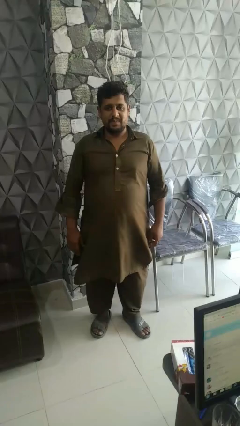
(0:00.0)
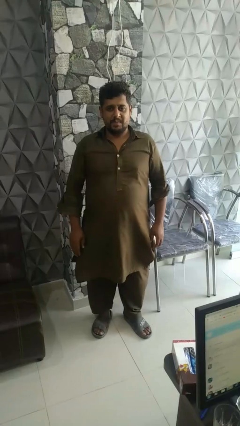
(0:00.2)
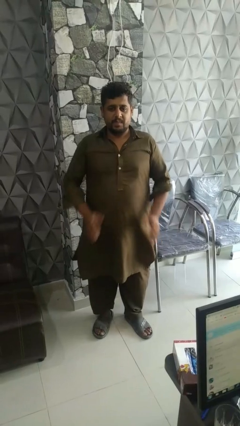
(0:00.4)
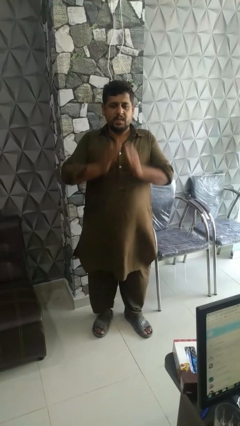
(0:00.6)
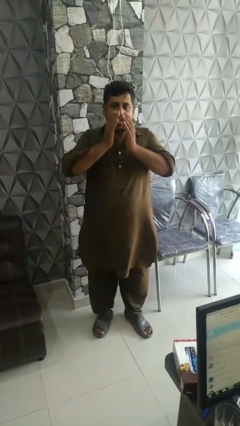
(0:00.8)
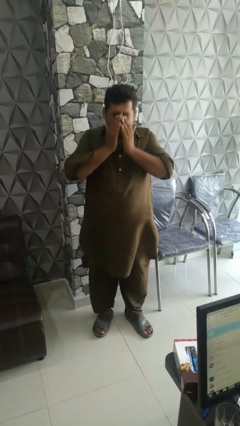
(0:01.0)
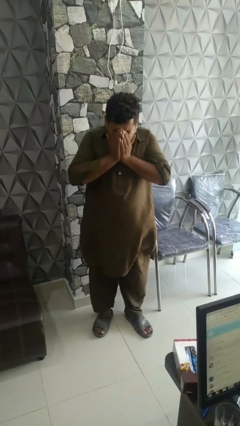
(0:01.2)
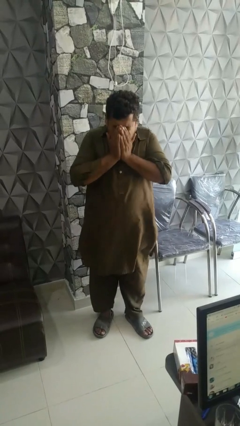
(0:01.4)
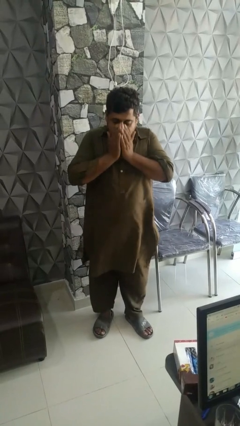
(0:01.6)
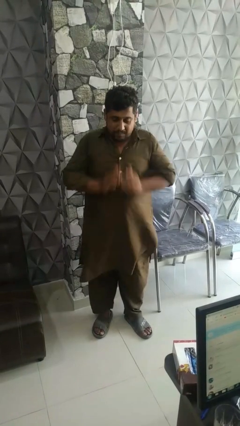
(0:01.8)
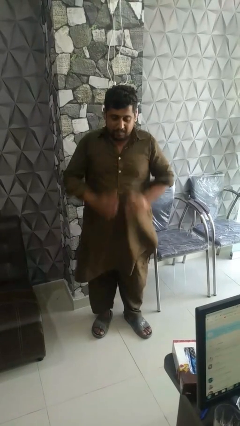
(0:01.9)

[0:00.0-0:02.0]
person sneezes into hand

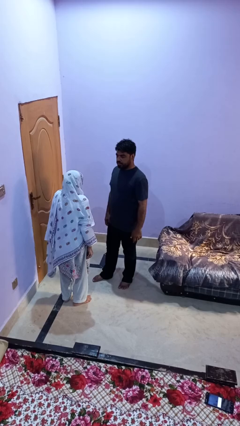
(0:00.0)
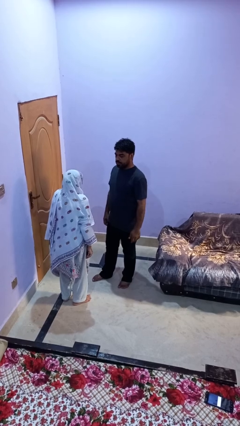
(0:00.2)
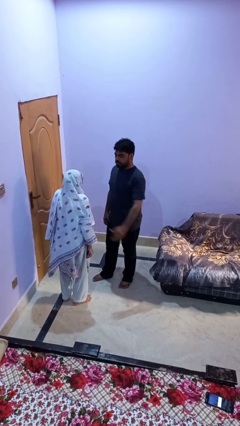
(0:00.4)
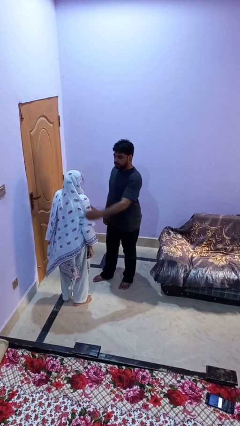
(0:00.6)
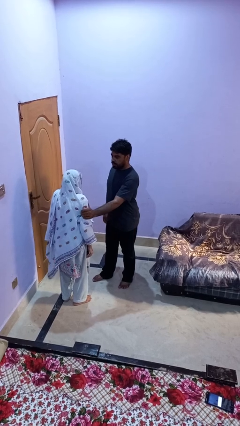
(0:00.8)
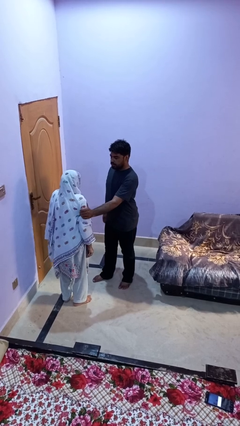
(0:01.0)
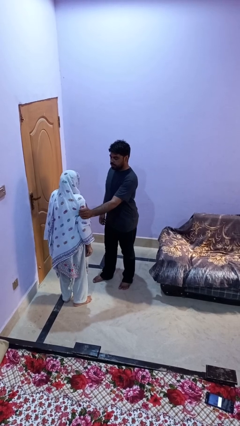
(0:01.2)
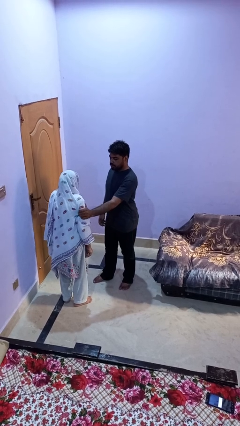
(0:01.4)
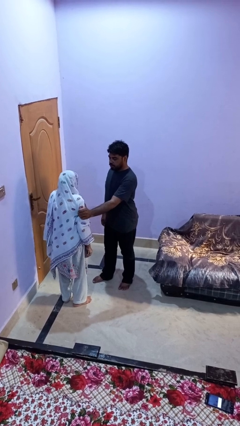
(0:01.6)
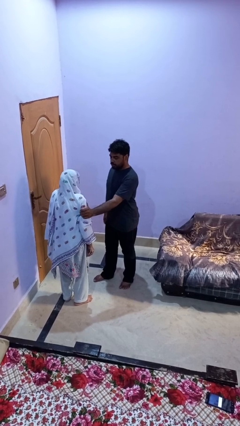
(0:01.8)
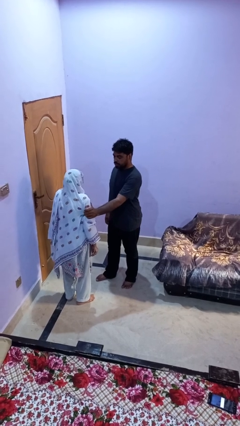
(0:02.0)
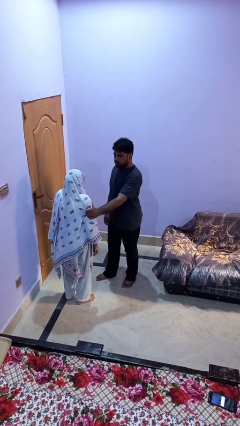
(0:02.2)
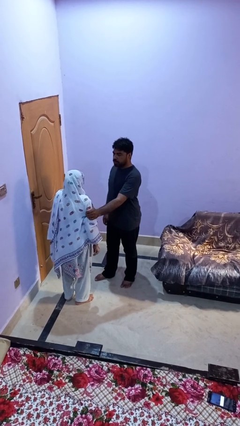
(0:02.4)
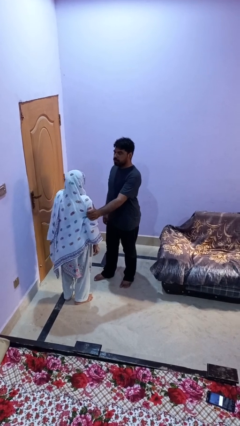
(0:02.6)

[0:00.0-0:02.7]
person grabs person by bicep

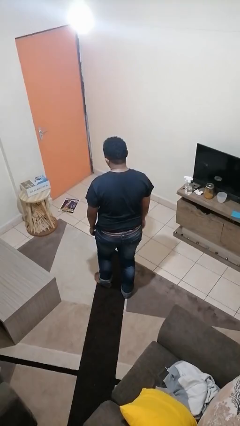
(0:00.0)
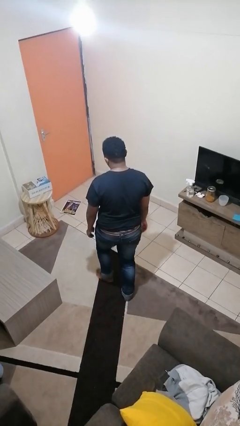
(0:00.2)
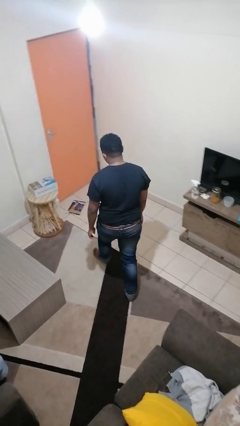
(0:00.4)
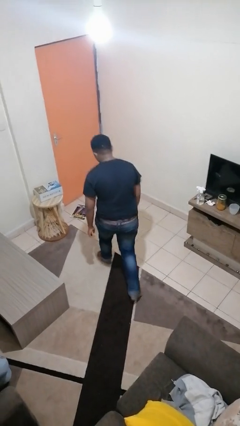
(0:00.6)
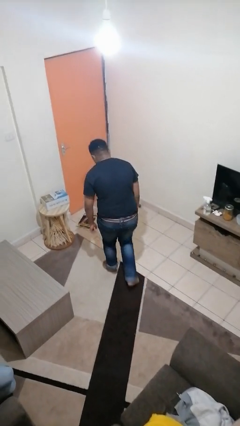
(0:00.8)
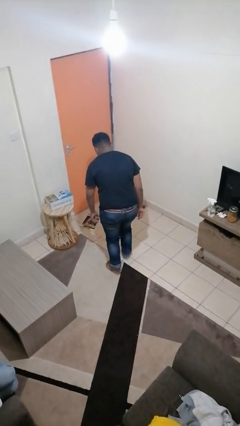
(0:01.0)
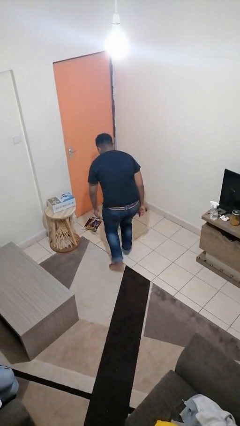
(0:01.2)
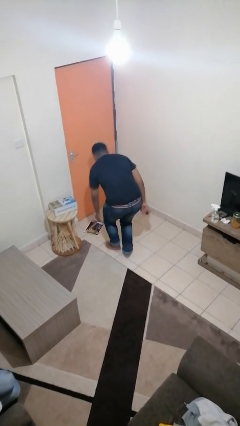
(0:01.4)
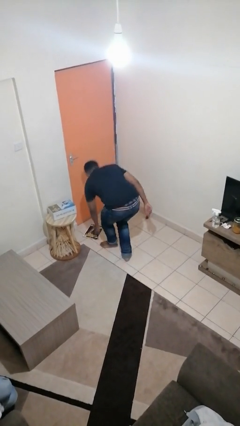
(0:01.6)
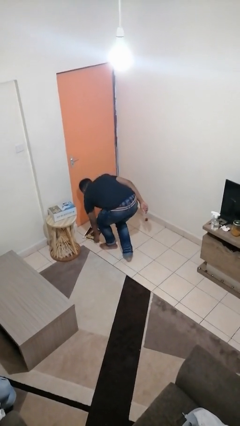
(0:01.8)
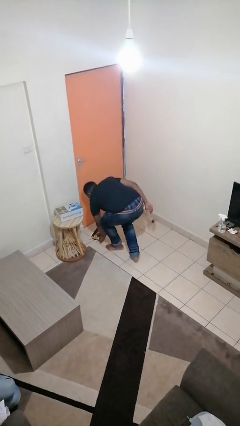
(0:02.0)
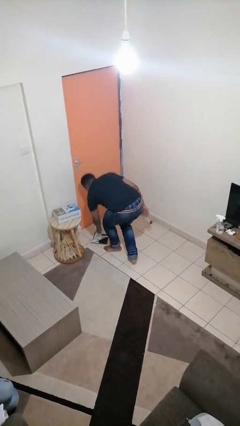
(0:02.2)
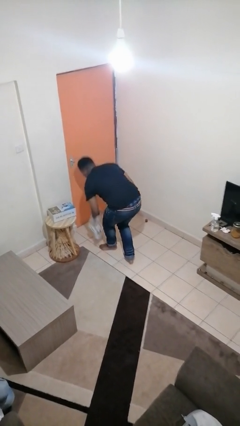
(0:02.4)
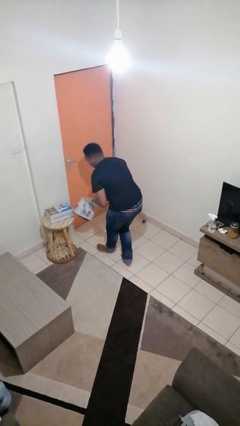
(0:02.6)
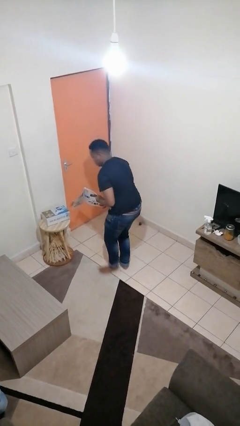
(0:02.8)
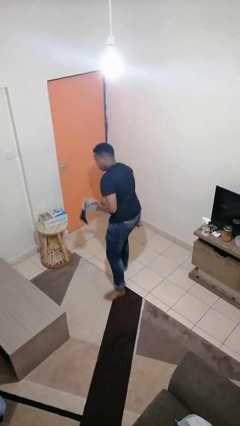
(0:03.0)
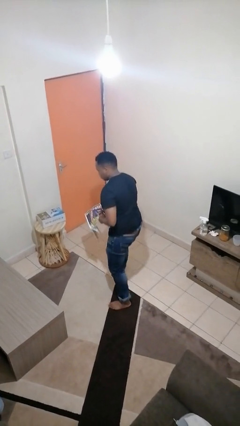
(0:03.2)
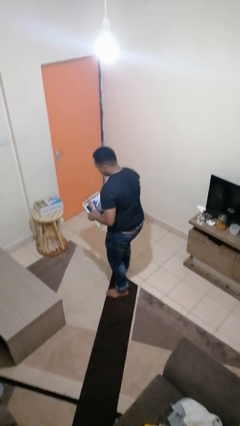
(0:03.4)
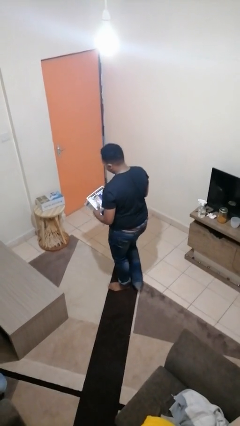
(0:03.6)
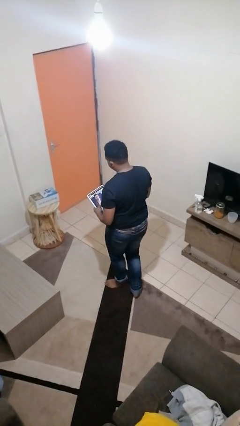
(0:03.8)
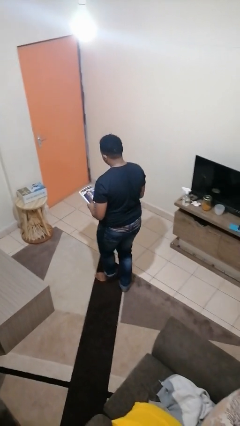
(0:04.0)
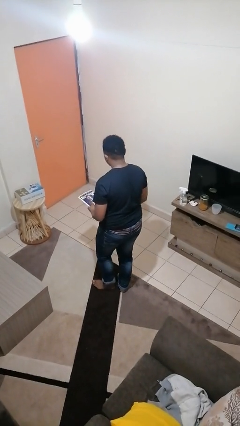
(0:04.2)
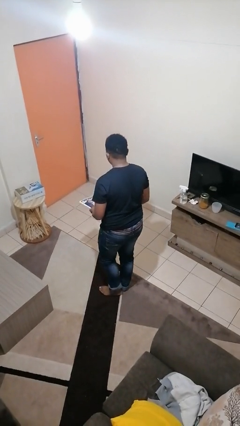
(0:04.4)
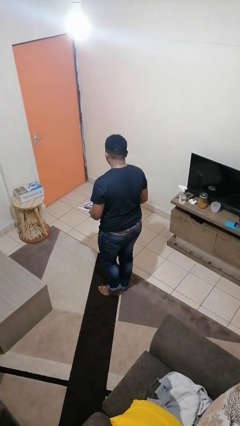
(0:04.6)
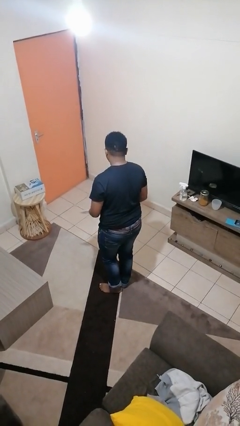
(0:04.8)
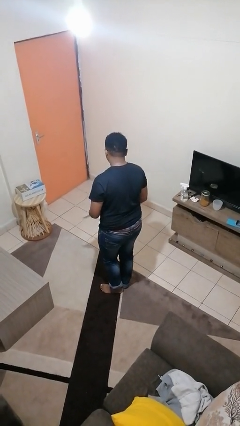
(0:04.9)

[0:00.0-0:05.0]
person picks up object from floor

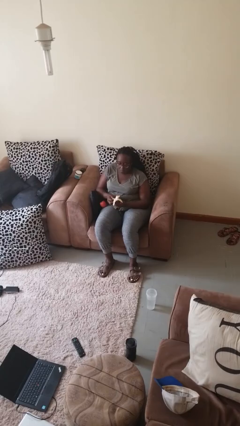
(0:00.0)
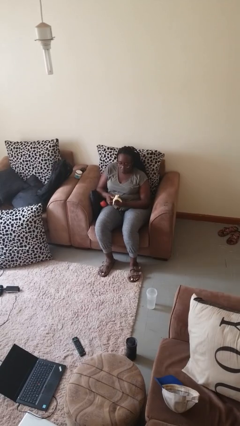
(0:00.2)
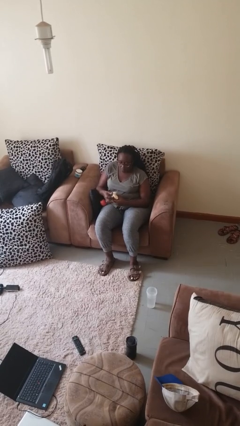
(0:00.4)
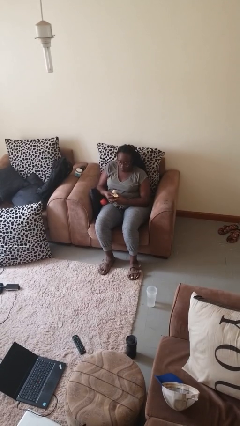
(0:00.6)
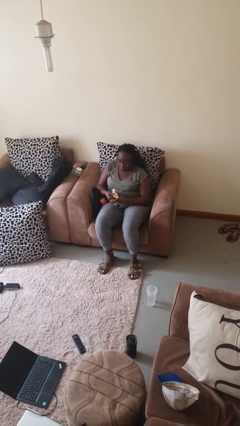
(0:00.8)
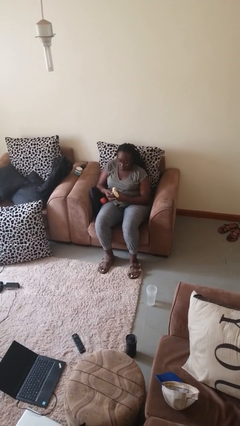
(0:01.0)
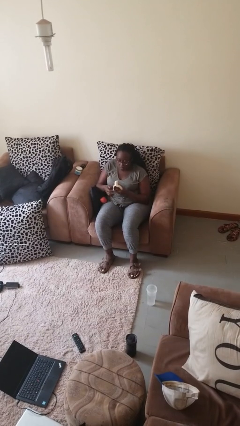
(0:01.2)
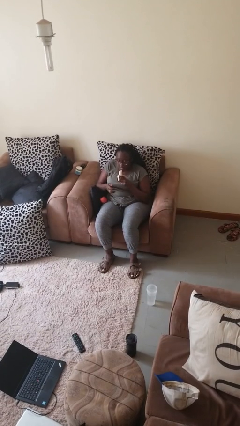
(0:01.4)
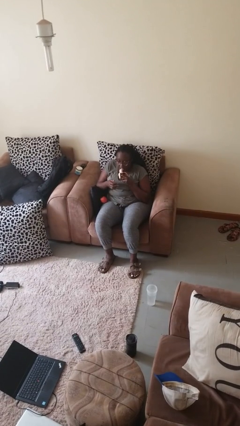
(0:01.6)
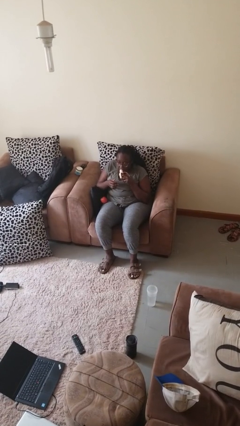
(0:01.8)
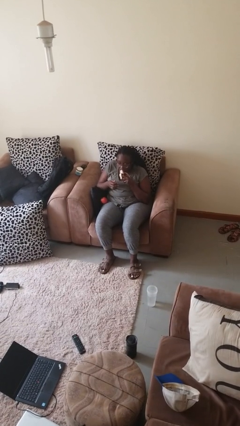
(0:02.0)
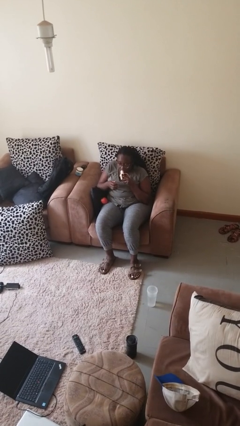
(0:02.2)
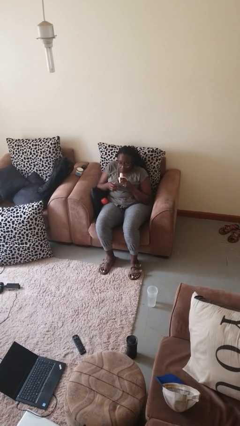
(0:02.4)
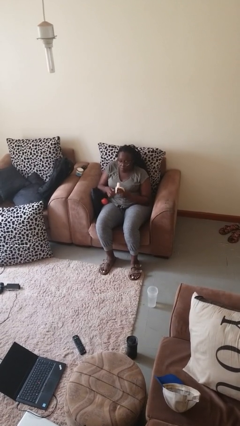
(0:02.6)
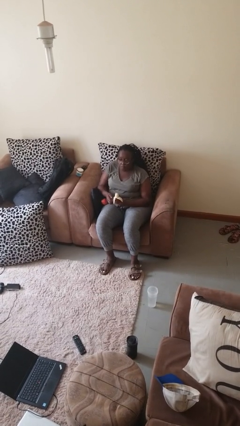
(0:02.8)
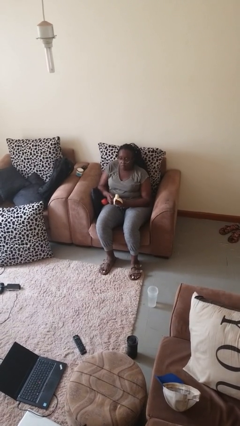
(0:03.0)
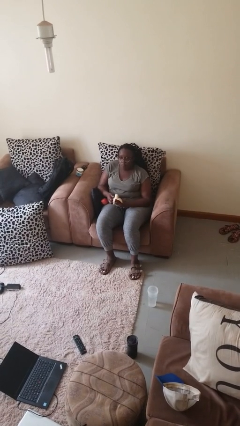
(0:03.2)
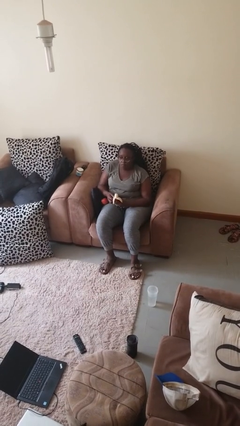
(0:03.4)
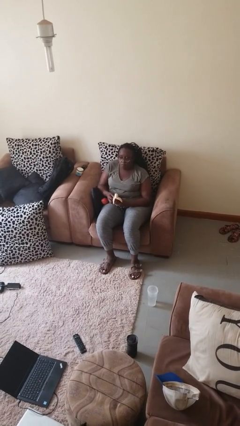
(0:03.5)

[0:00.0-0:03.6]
person eats banana

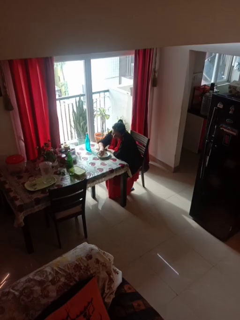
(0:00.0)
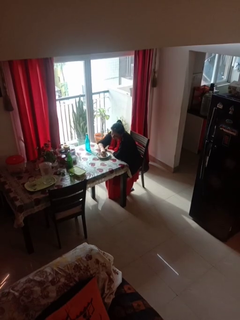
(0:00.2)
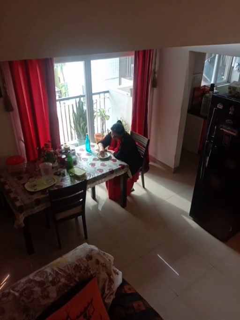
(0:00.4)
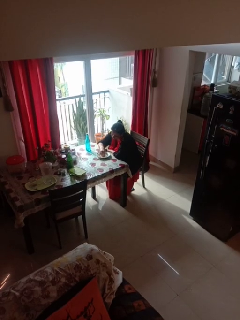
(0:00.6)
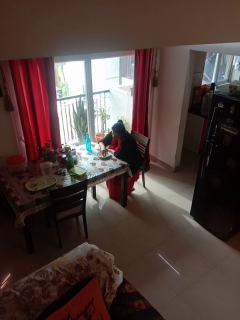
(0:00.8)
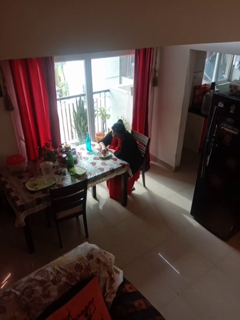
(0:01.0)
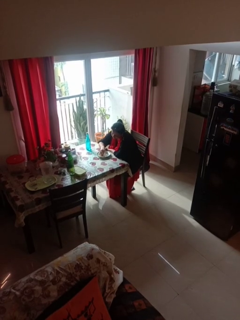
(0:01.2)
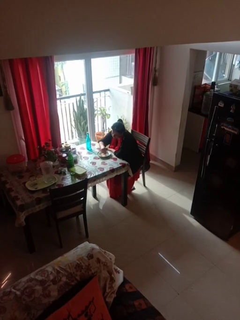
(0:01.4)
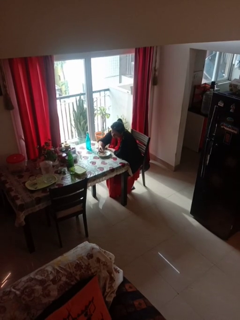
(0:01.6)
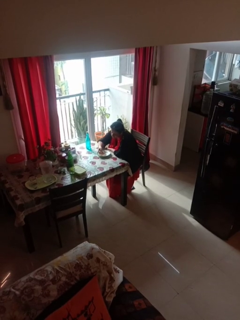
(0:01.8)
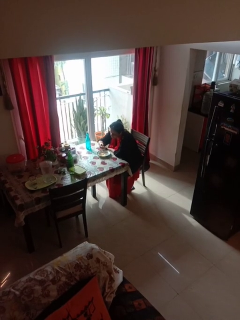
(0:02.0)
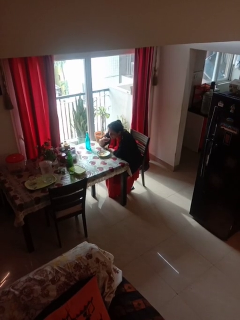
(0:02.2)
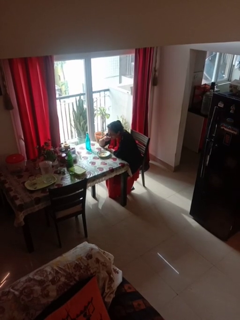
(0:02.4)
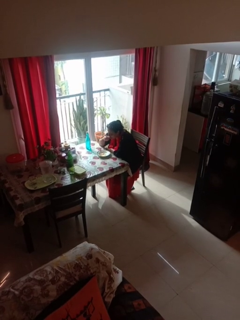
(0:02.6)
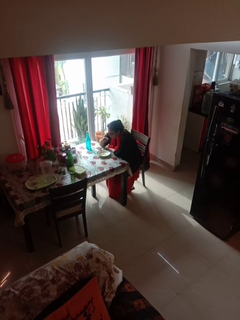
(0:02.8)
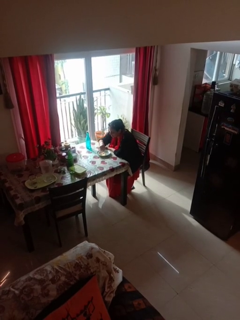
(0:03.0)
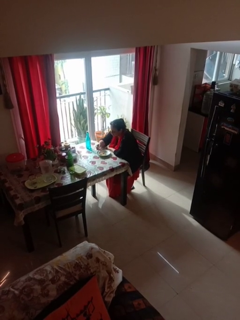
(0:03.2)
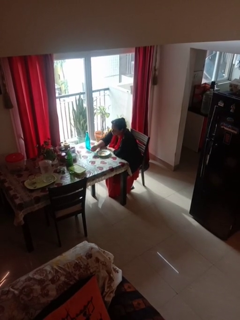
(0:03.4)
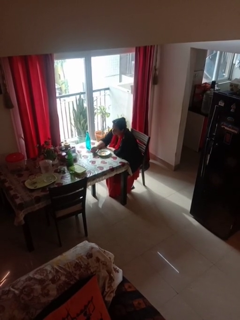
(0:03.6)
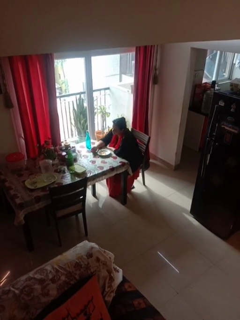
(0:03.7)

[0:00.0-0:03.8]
person eats with hands

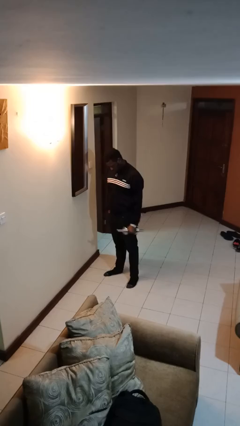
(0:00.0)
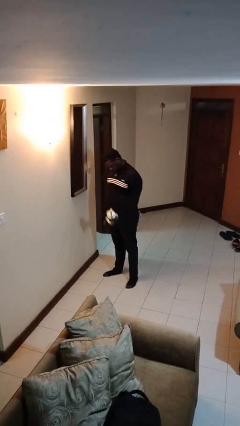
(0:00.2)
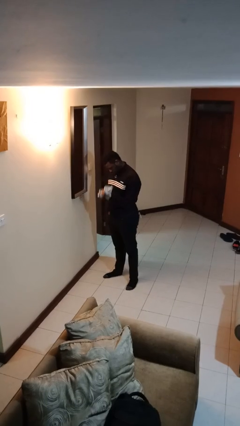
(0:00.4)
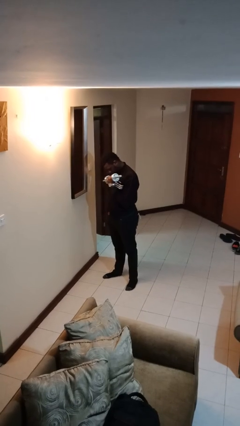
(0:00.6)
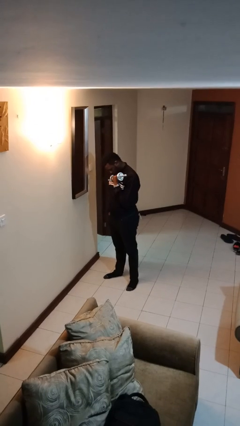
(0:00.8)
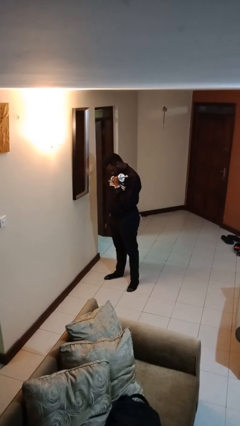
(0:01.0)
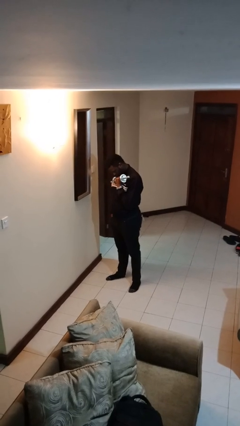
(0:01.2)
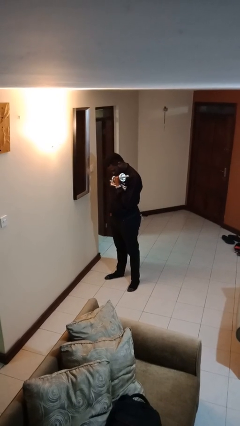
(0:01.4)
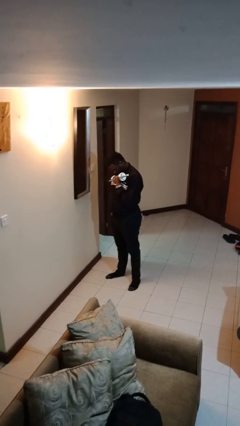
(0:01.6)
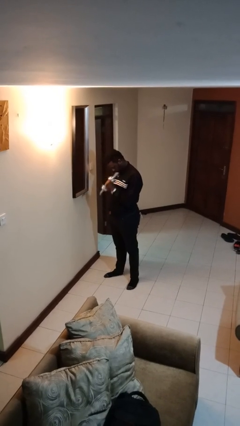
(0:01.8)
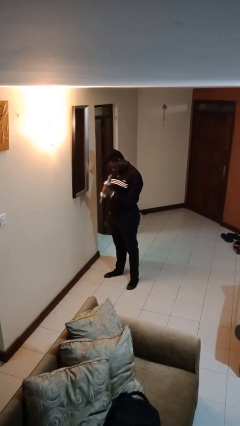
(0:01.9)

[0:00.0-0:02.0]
person lifts dumbbells
